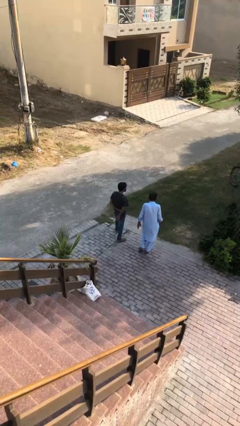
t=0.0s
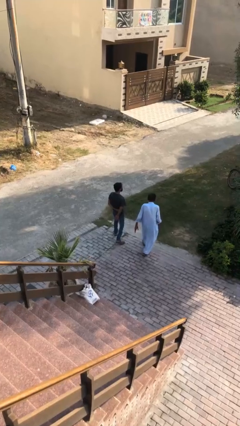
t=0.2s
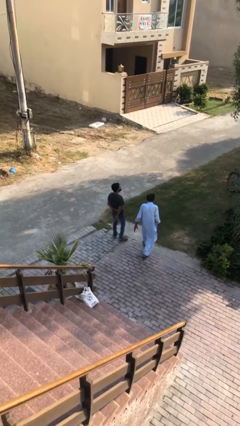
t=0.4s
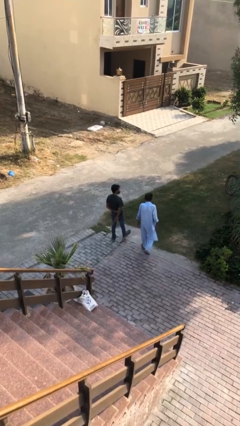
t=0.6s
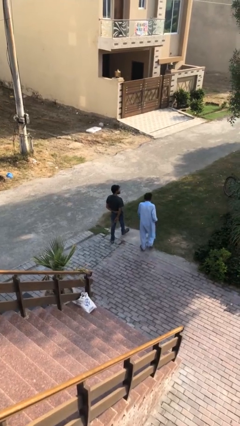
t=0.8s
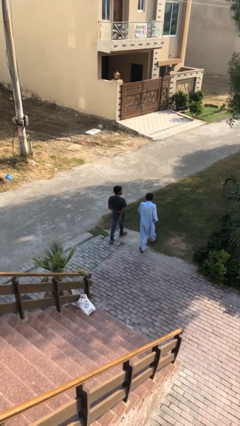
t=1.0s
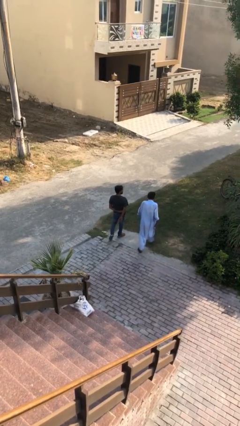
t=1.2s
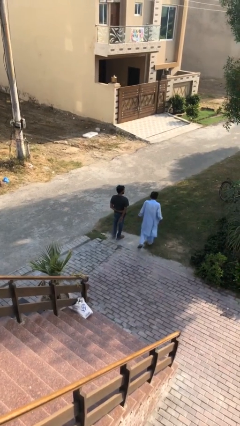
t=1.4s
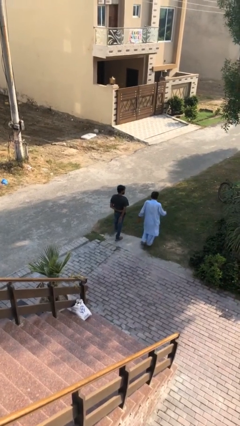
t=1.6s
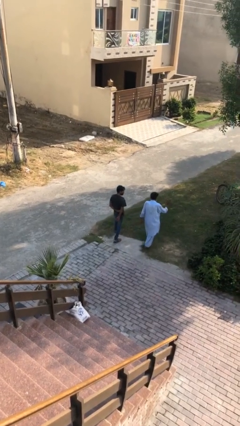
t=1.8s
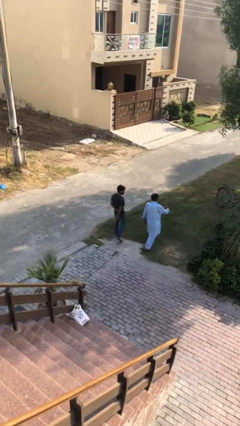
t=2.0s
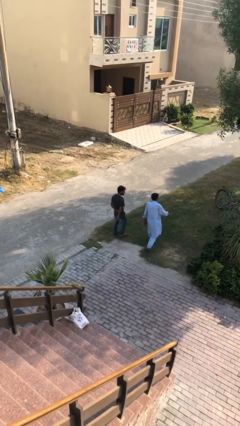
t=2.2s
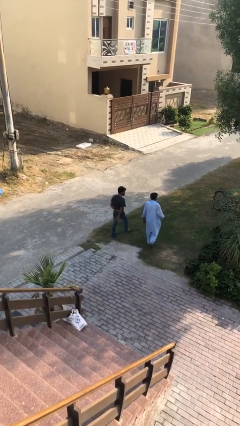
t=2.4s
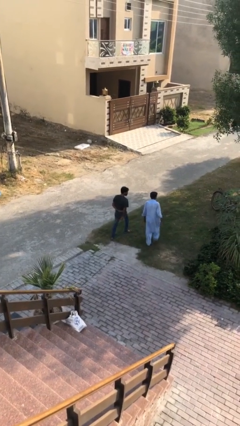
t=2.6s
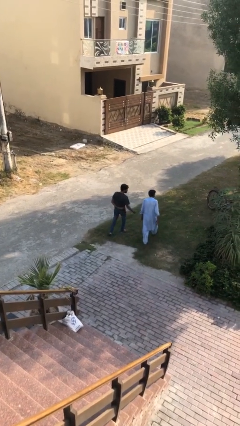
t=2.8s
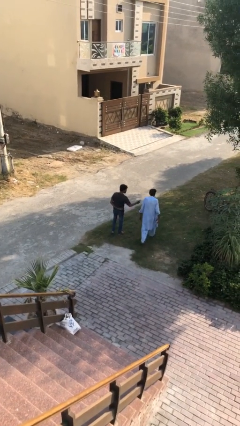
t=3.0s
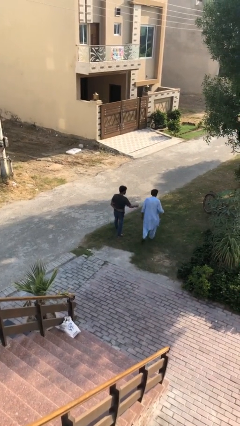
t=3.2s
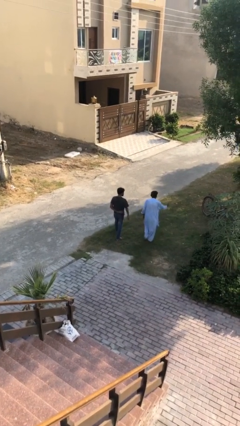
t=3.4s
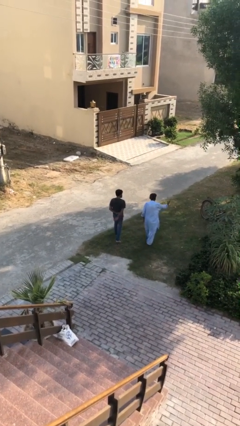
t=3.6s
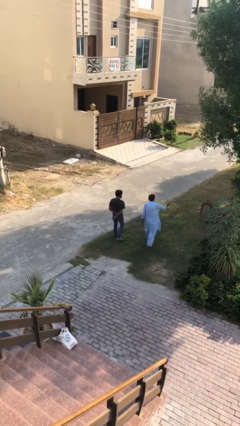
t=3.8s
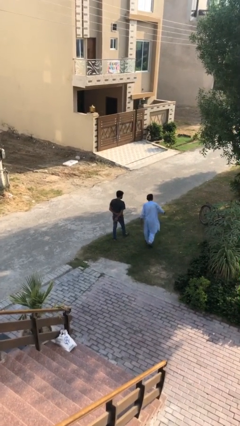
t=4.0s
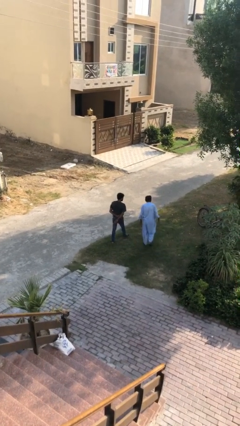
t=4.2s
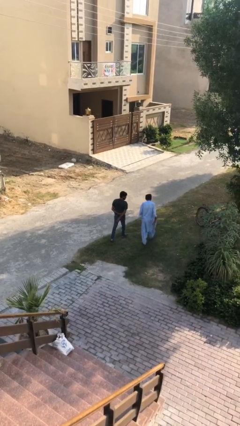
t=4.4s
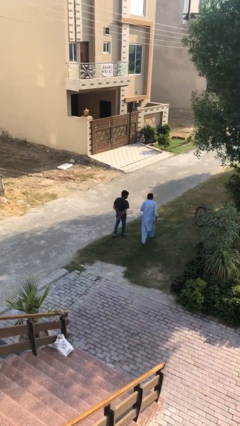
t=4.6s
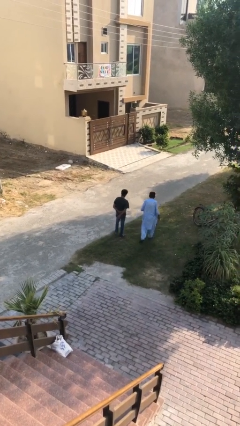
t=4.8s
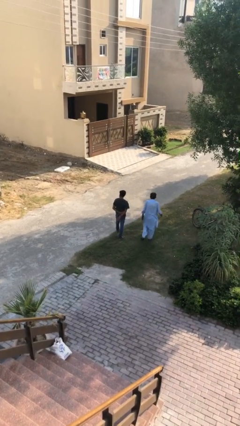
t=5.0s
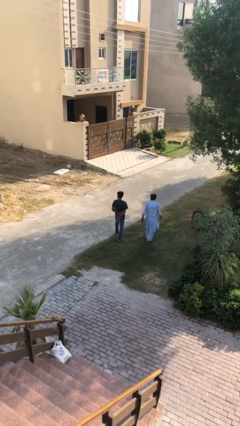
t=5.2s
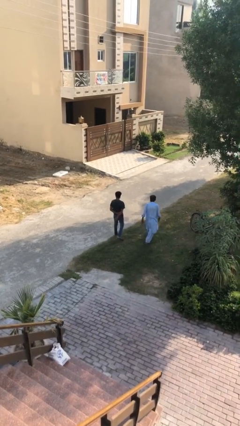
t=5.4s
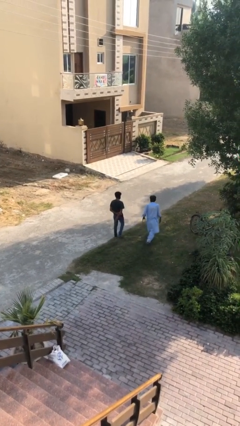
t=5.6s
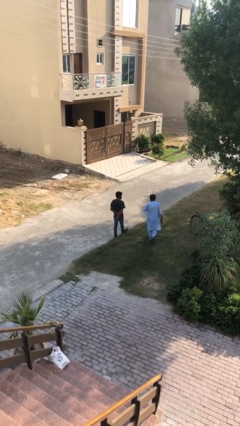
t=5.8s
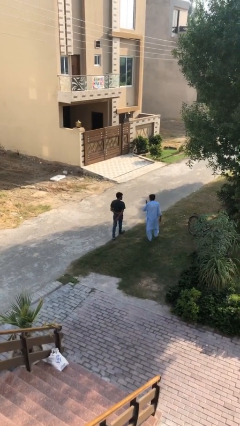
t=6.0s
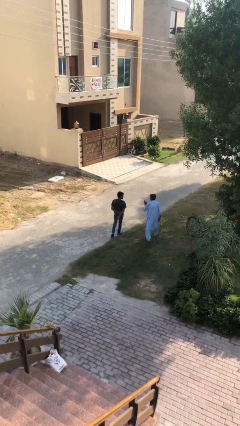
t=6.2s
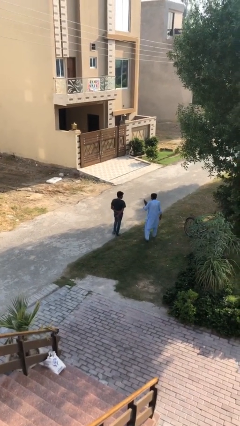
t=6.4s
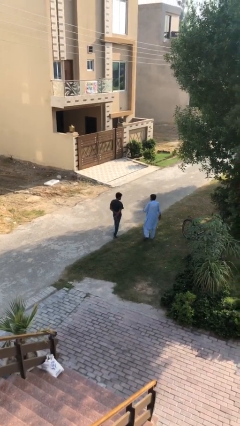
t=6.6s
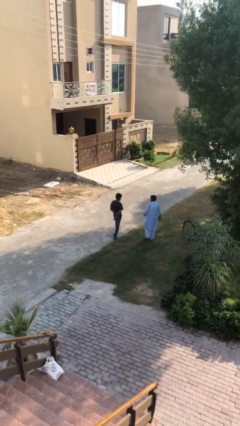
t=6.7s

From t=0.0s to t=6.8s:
person talks to person

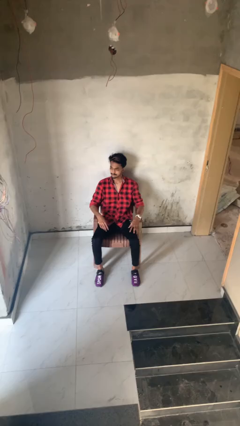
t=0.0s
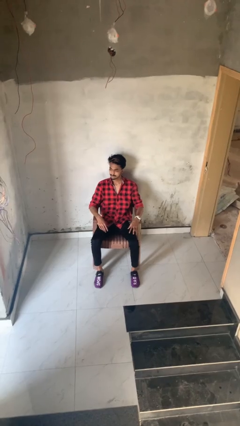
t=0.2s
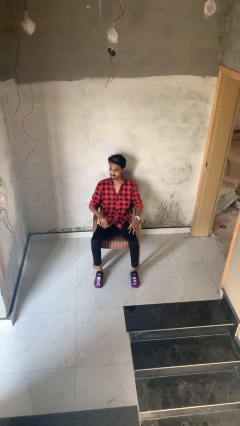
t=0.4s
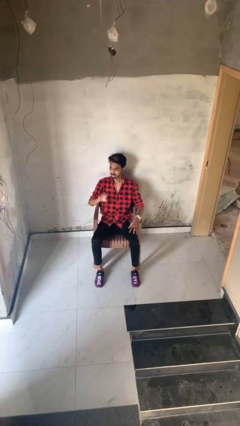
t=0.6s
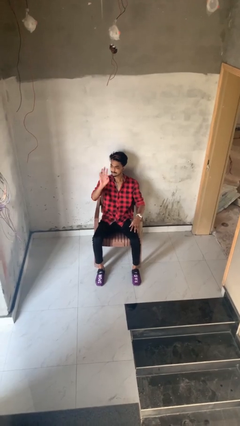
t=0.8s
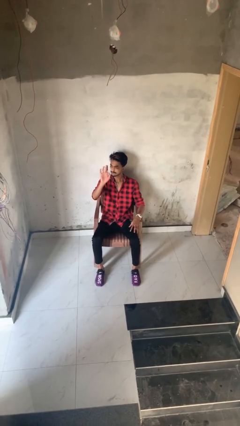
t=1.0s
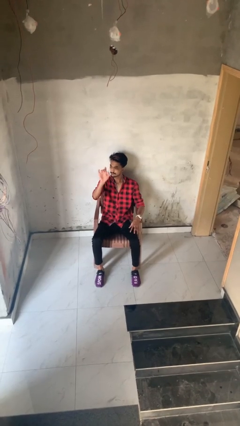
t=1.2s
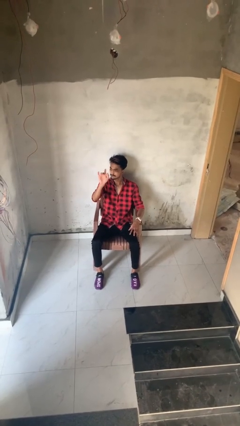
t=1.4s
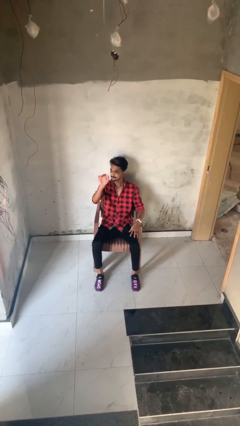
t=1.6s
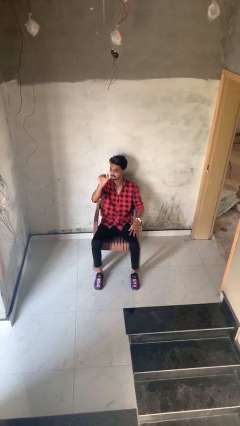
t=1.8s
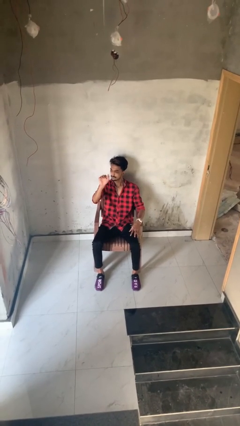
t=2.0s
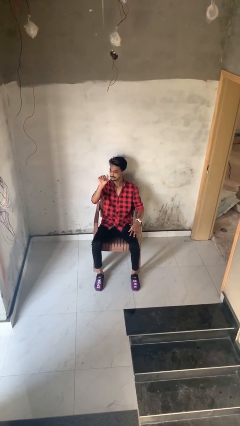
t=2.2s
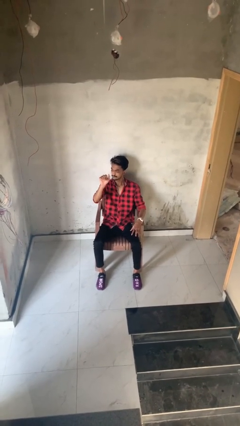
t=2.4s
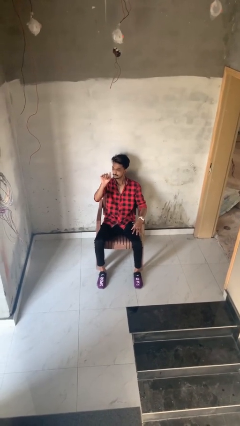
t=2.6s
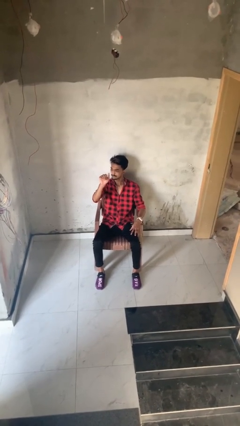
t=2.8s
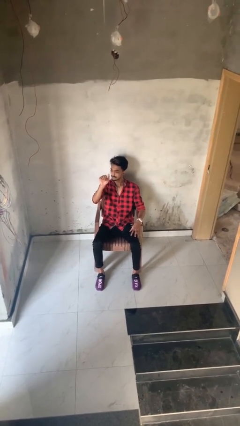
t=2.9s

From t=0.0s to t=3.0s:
person gestures come here

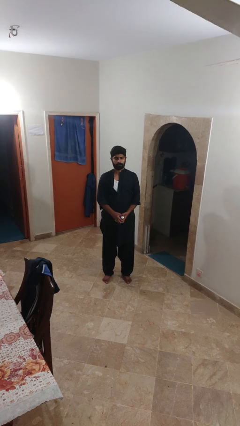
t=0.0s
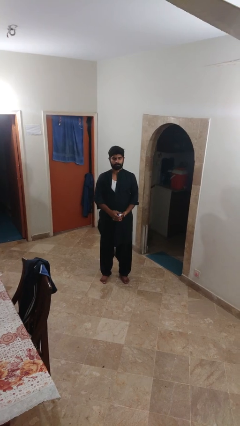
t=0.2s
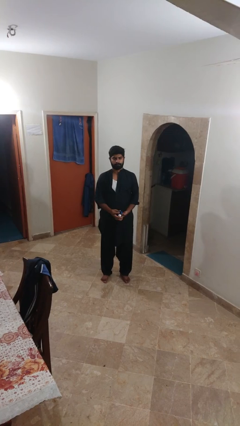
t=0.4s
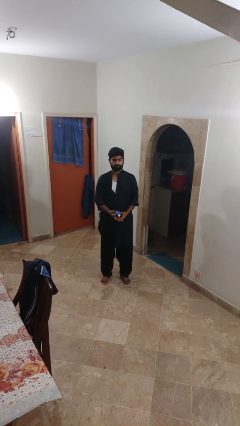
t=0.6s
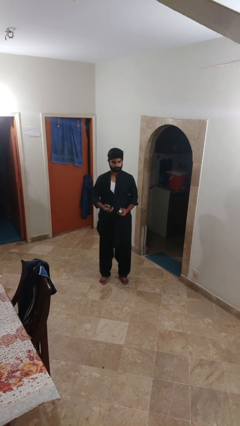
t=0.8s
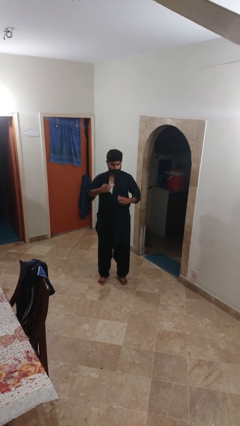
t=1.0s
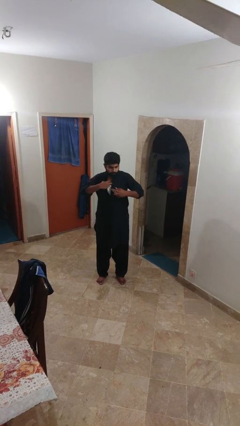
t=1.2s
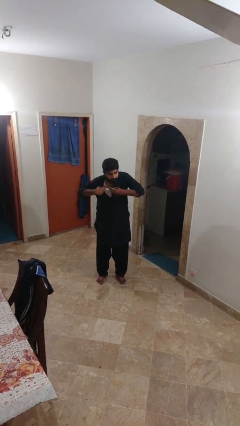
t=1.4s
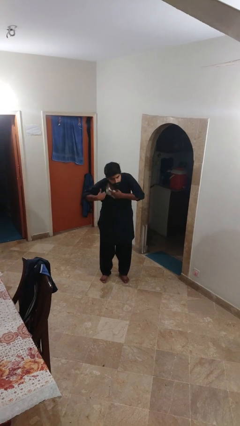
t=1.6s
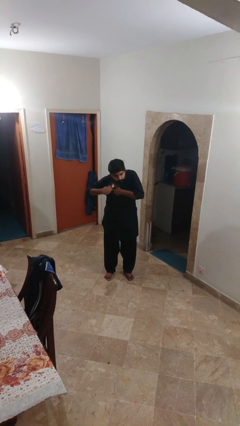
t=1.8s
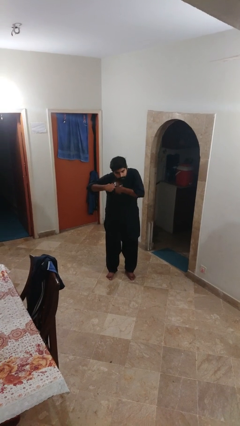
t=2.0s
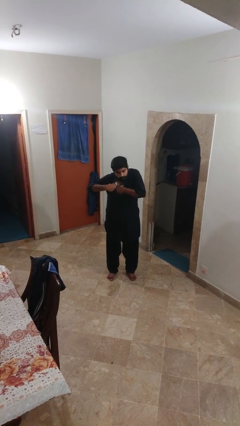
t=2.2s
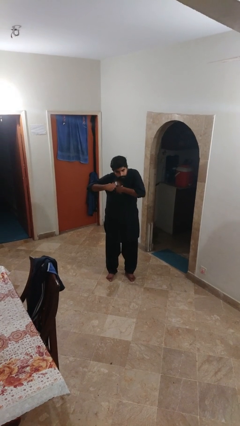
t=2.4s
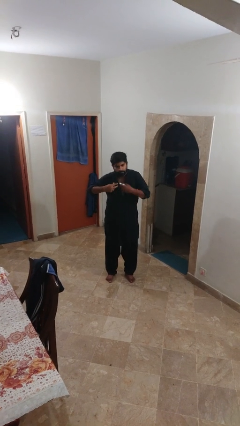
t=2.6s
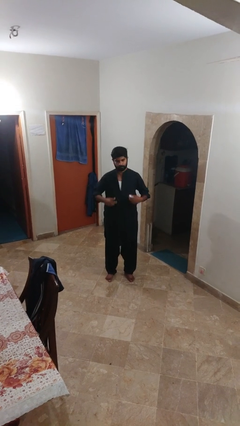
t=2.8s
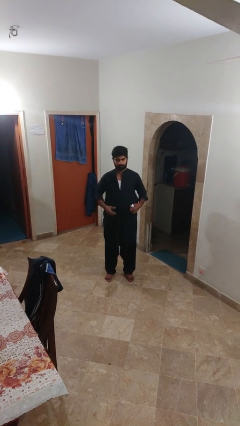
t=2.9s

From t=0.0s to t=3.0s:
person applies deodorant

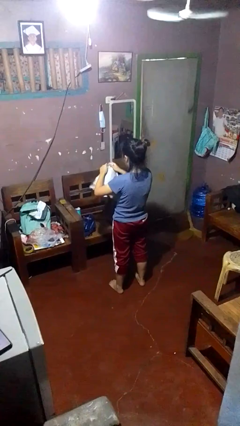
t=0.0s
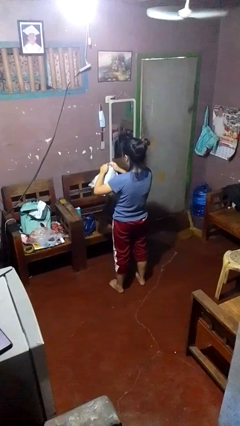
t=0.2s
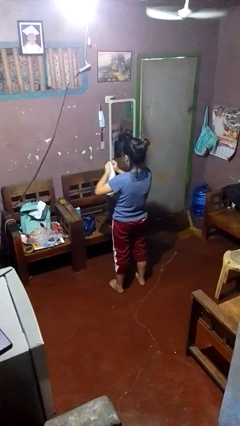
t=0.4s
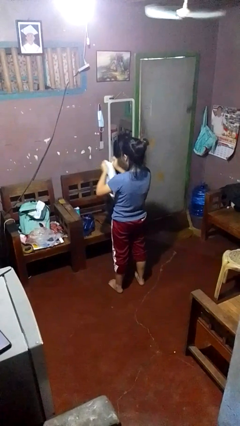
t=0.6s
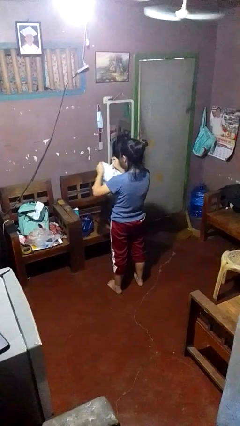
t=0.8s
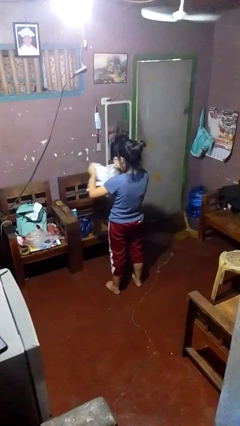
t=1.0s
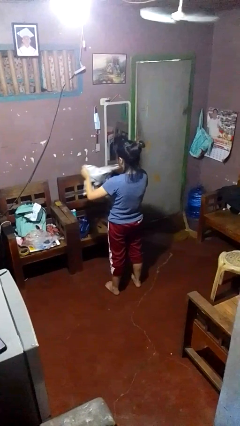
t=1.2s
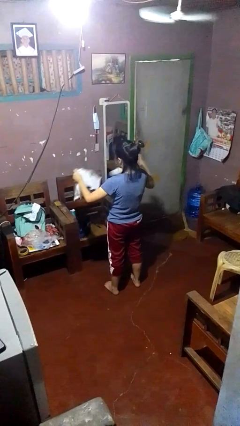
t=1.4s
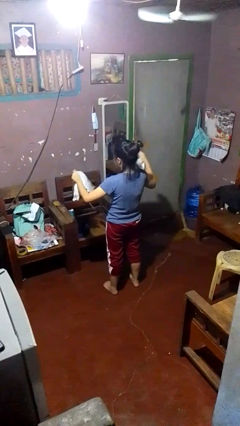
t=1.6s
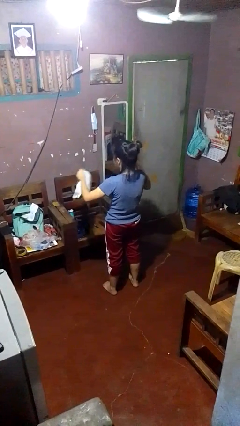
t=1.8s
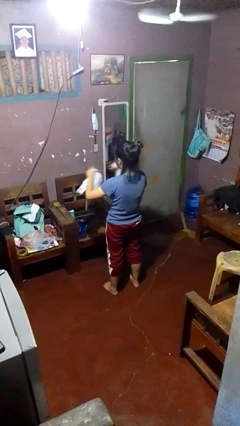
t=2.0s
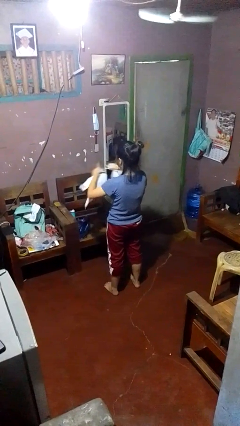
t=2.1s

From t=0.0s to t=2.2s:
person tears paper

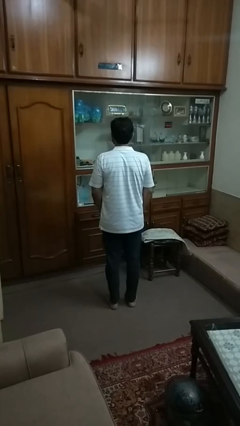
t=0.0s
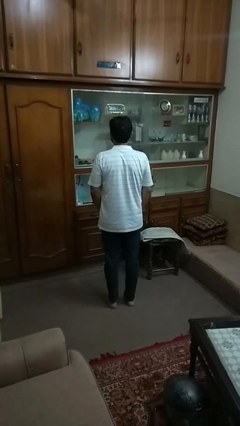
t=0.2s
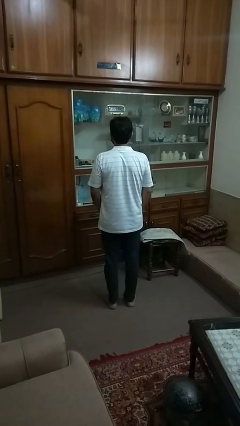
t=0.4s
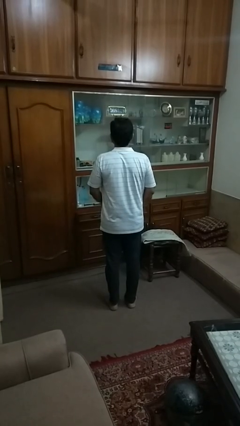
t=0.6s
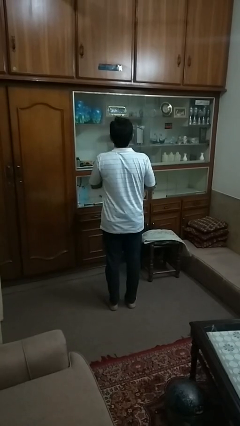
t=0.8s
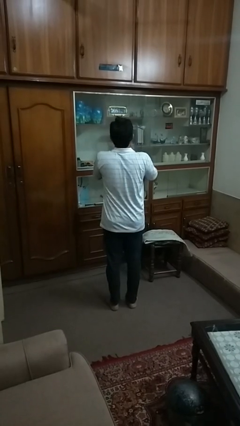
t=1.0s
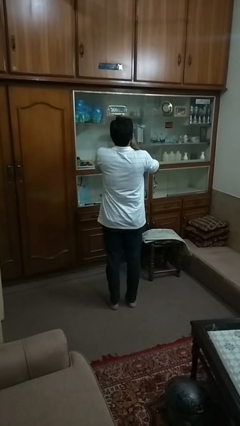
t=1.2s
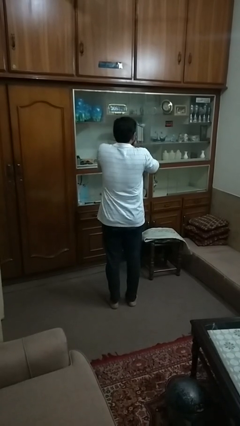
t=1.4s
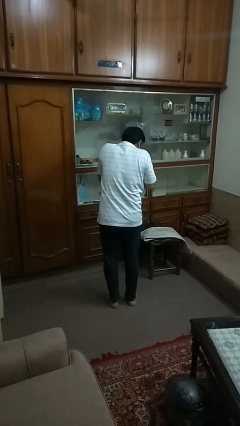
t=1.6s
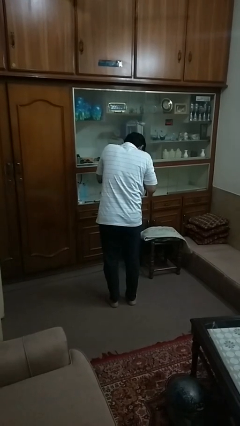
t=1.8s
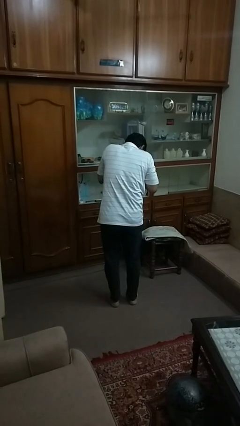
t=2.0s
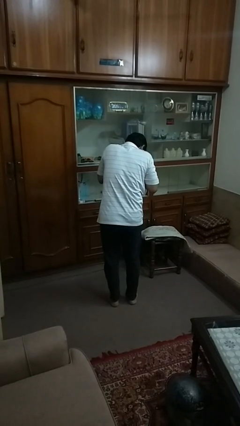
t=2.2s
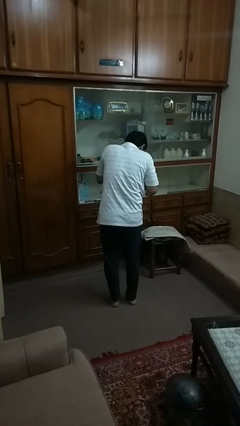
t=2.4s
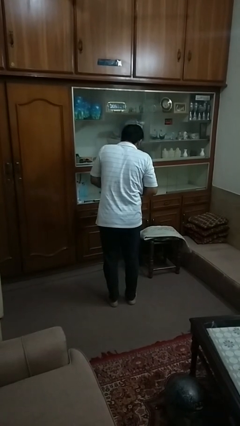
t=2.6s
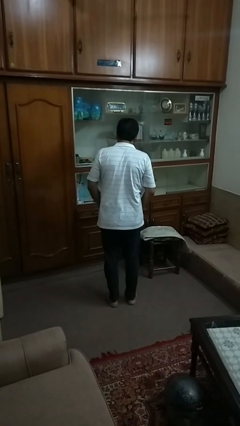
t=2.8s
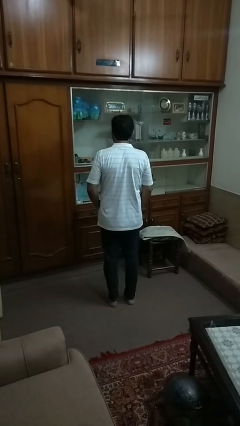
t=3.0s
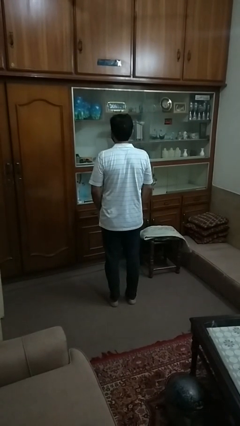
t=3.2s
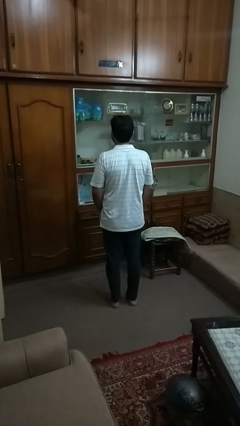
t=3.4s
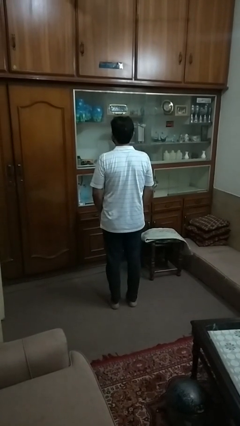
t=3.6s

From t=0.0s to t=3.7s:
person sneezes into hand
